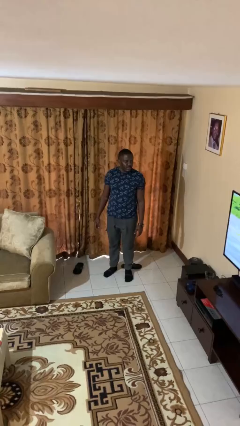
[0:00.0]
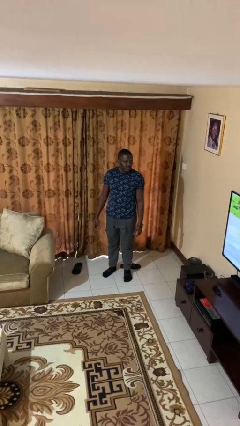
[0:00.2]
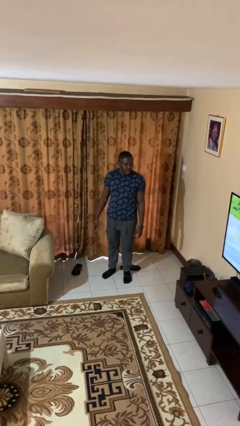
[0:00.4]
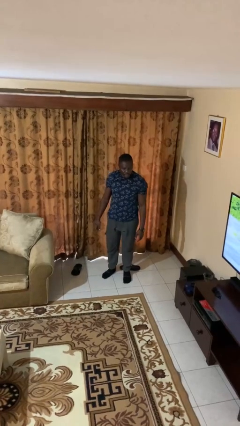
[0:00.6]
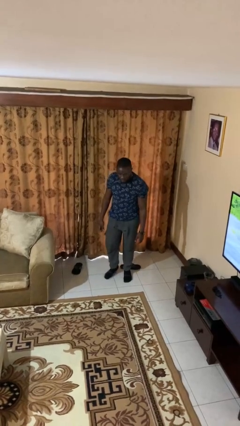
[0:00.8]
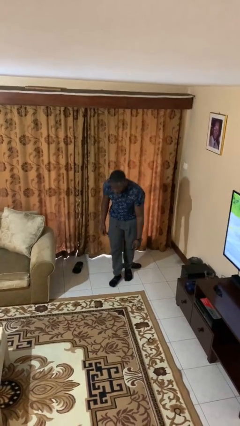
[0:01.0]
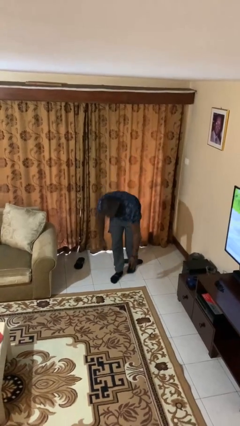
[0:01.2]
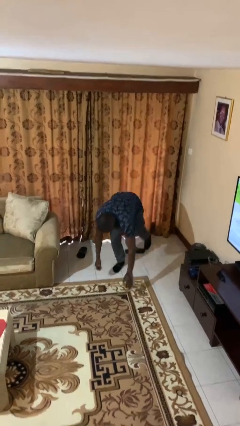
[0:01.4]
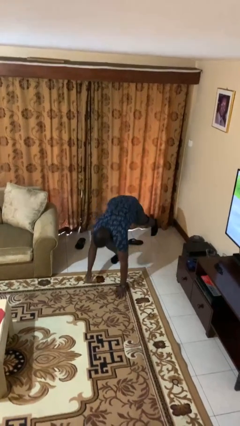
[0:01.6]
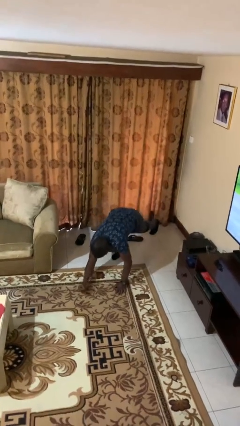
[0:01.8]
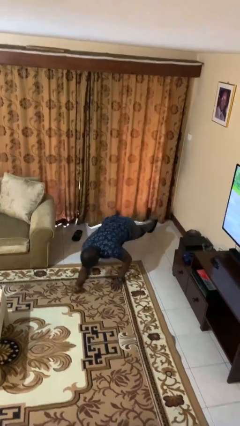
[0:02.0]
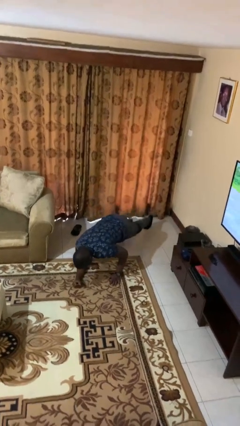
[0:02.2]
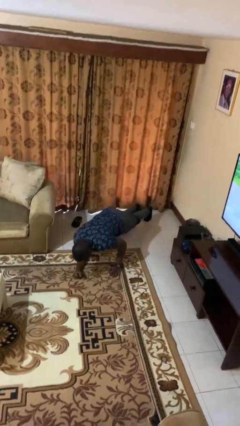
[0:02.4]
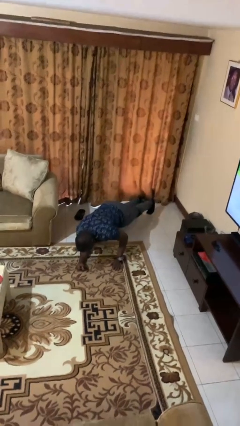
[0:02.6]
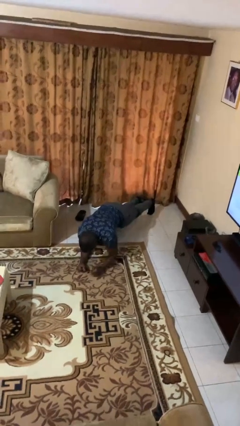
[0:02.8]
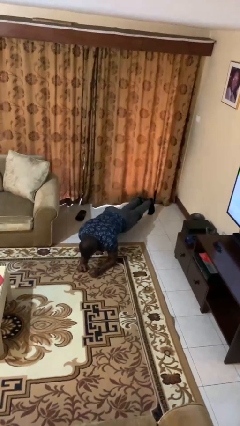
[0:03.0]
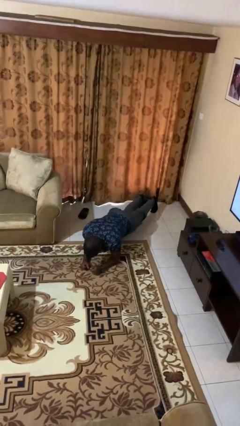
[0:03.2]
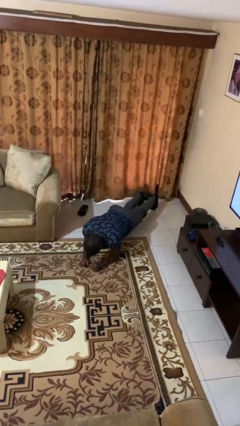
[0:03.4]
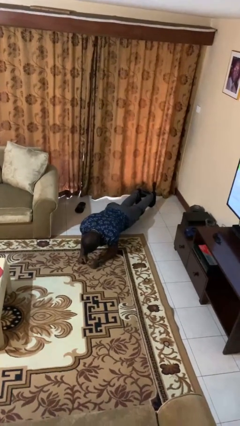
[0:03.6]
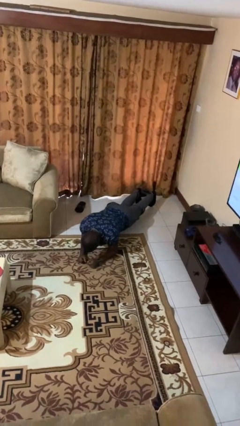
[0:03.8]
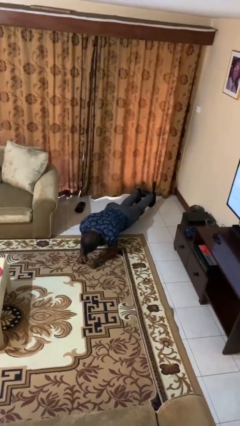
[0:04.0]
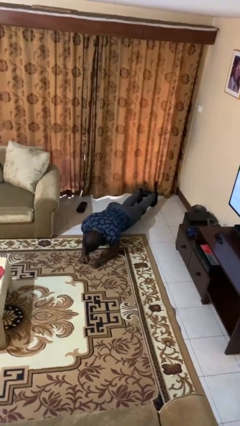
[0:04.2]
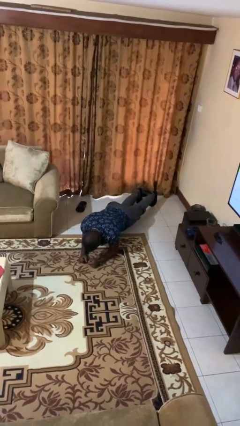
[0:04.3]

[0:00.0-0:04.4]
person exercises with plank

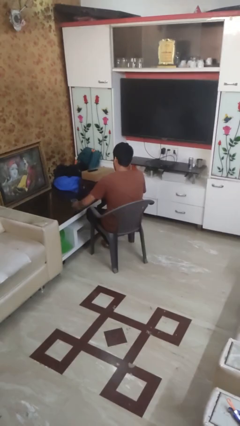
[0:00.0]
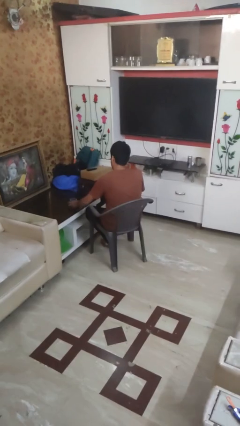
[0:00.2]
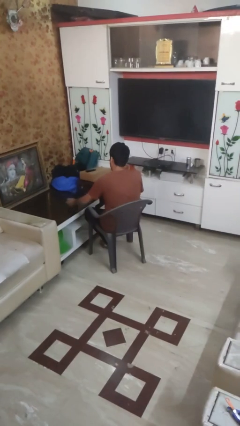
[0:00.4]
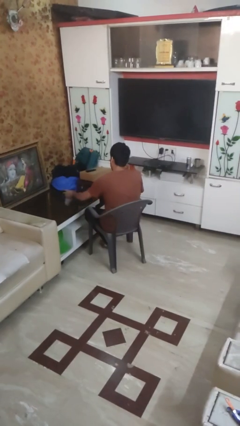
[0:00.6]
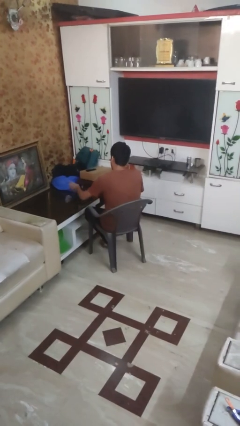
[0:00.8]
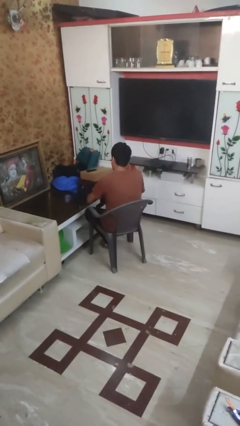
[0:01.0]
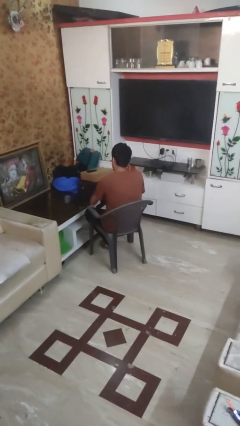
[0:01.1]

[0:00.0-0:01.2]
person knocks over glass

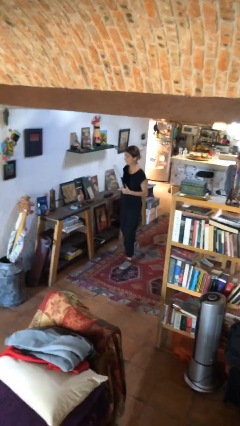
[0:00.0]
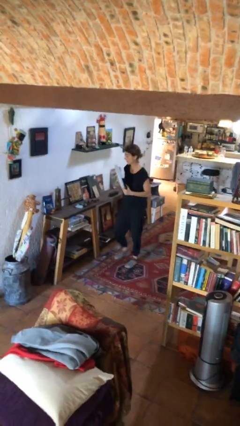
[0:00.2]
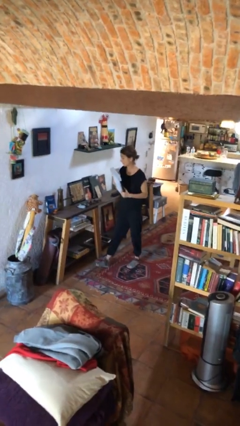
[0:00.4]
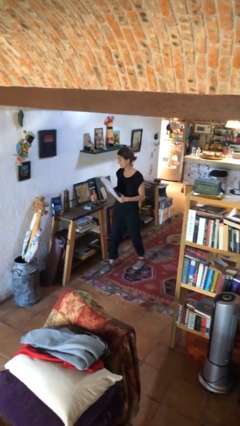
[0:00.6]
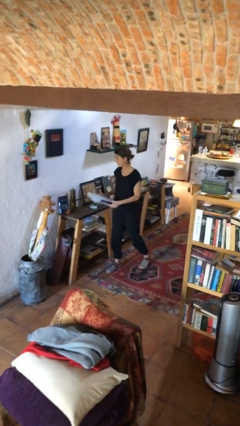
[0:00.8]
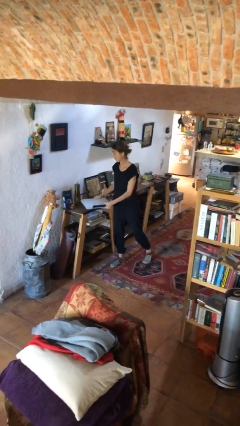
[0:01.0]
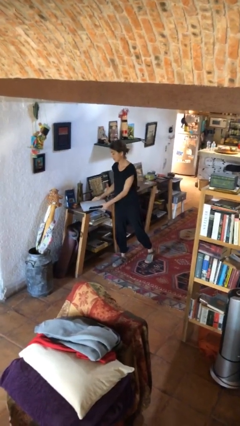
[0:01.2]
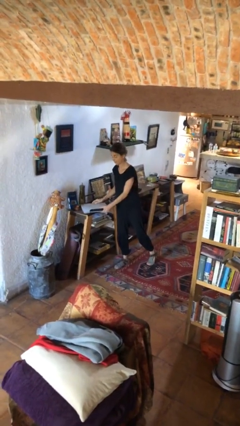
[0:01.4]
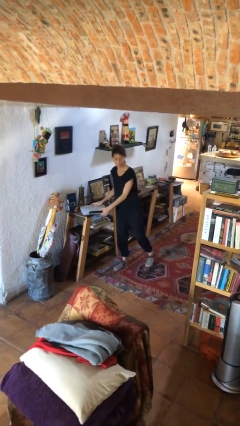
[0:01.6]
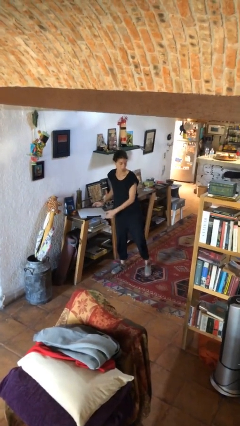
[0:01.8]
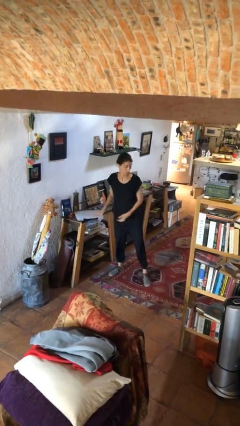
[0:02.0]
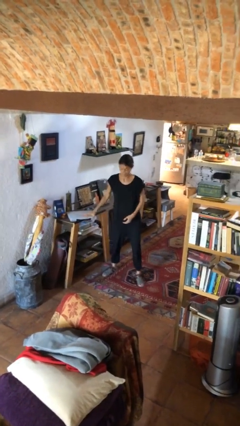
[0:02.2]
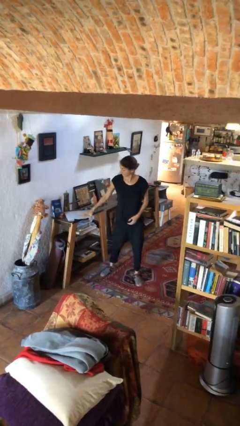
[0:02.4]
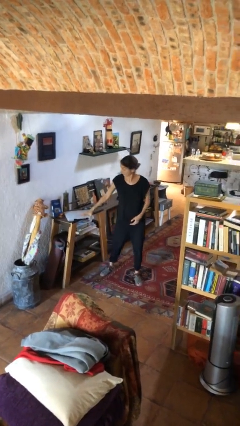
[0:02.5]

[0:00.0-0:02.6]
person puts down object on table

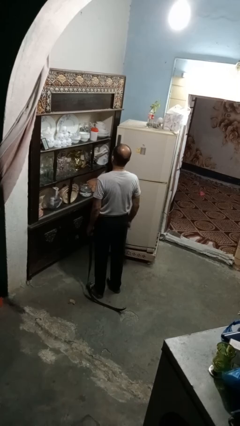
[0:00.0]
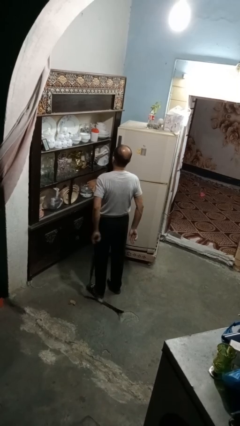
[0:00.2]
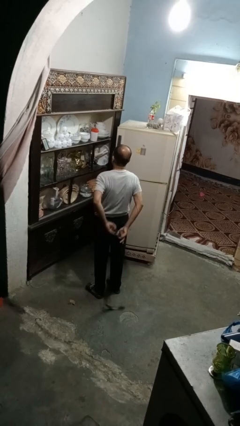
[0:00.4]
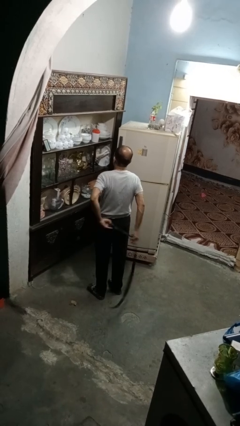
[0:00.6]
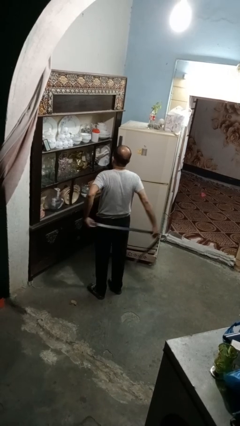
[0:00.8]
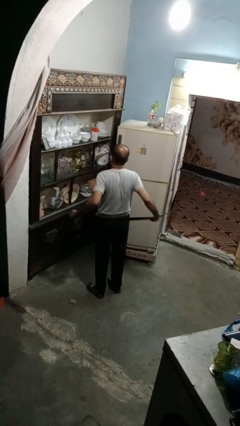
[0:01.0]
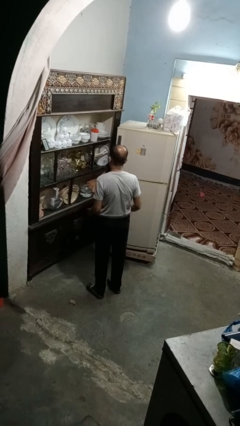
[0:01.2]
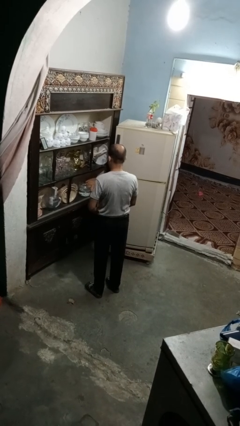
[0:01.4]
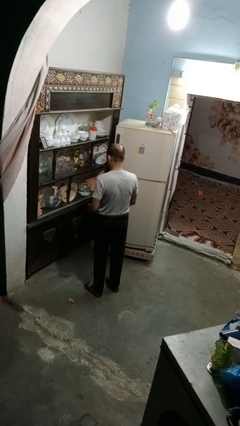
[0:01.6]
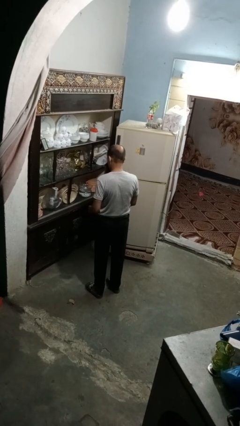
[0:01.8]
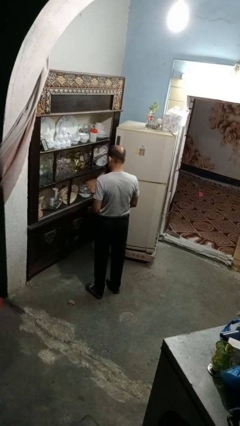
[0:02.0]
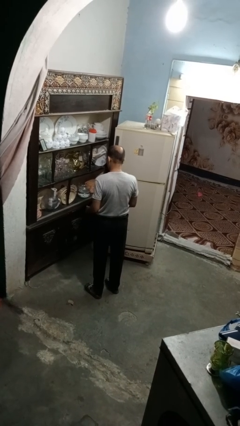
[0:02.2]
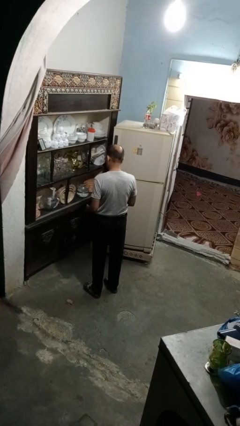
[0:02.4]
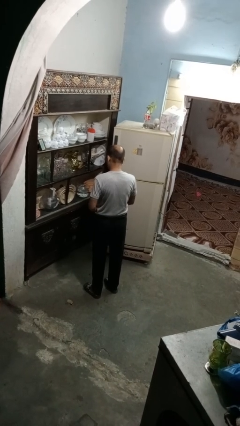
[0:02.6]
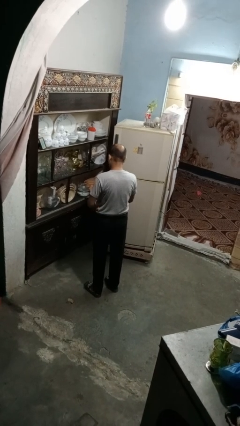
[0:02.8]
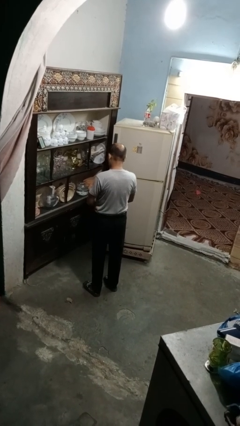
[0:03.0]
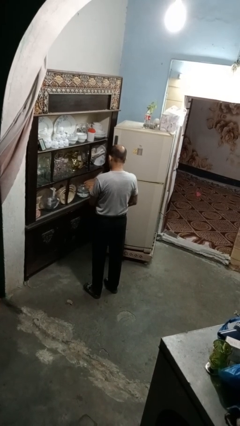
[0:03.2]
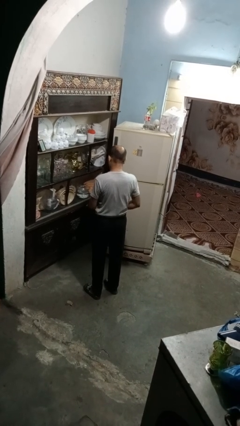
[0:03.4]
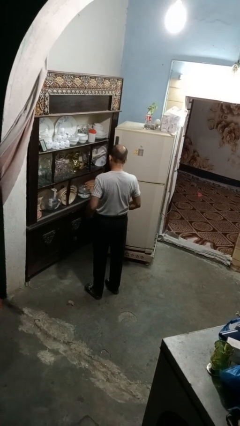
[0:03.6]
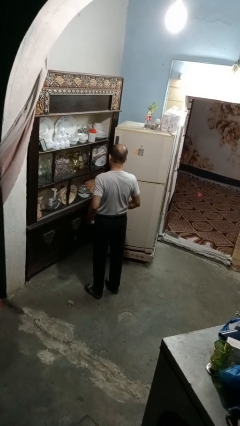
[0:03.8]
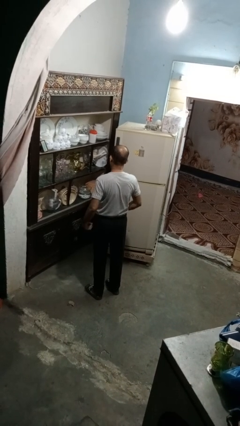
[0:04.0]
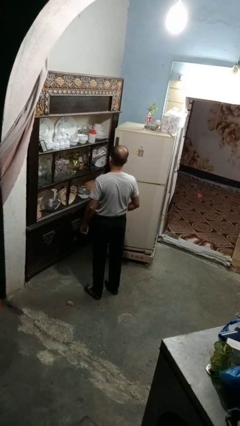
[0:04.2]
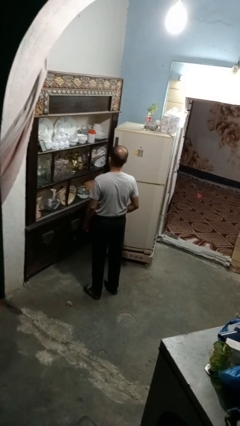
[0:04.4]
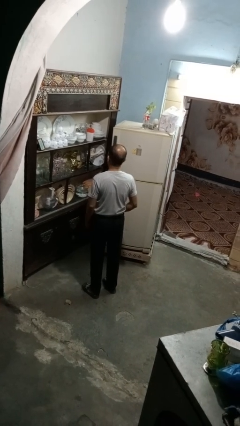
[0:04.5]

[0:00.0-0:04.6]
person puts on belt

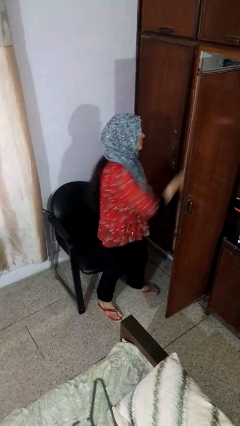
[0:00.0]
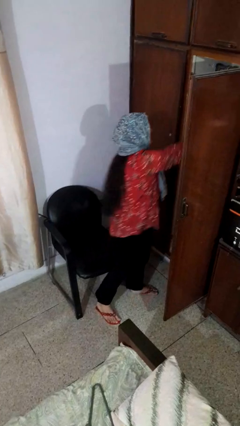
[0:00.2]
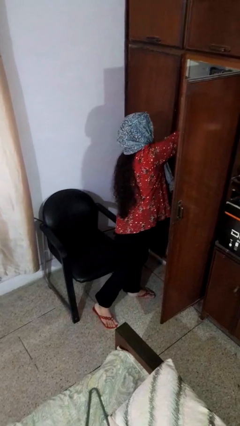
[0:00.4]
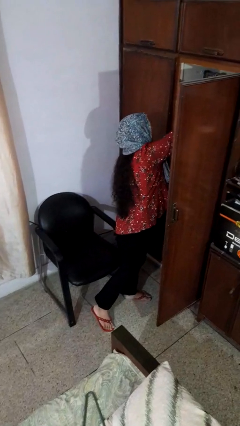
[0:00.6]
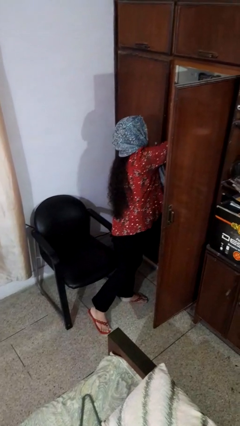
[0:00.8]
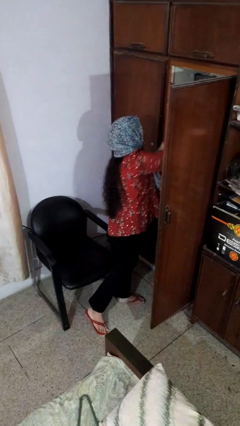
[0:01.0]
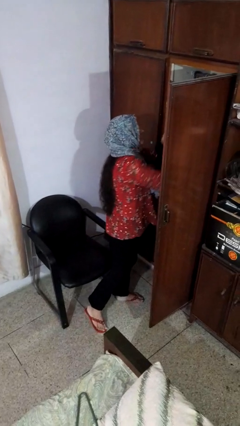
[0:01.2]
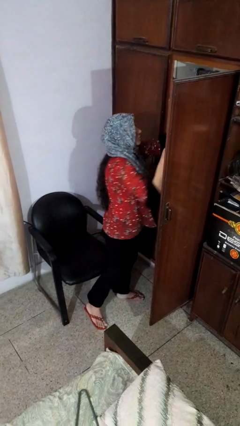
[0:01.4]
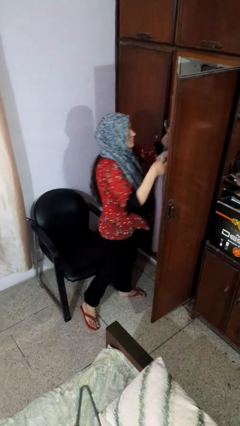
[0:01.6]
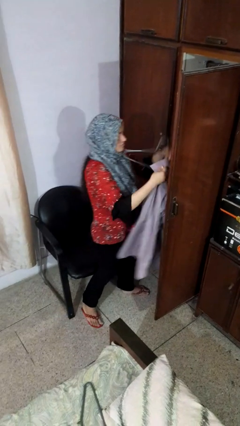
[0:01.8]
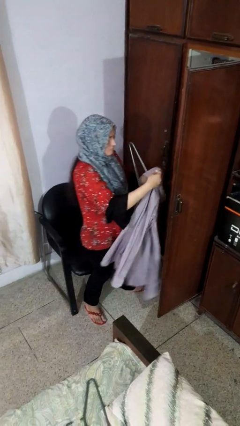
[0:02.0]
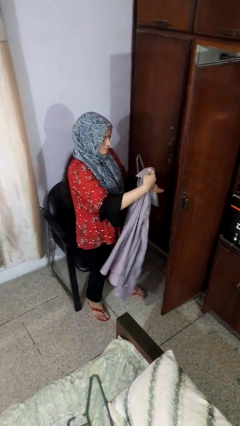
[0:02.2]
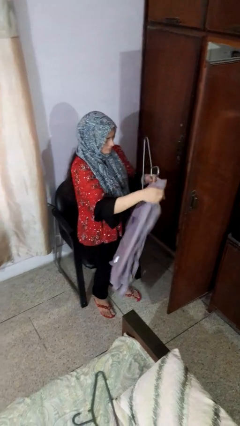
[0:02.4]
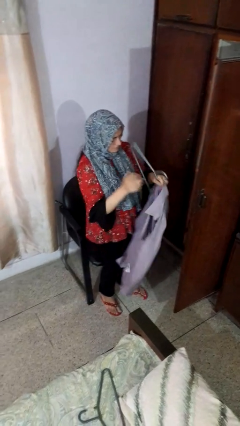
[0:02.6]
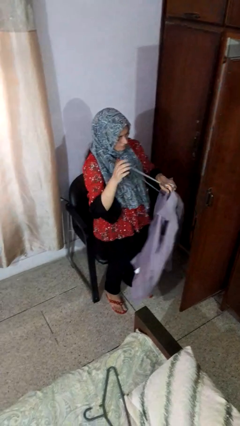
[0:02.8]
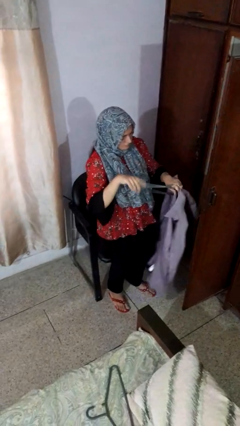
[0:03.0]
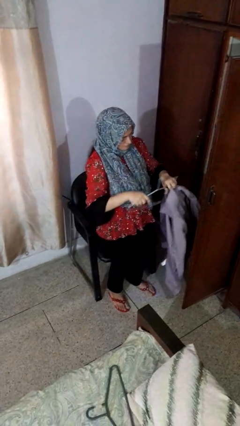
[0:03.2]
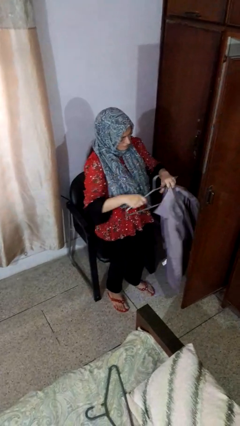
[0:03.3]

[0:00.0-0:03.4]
person takes clothes from closet

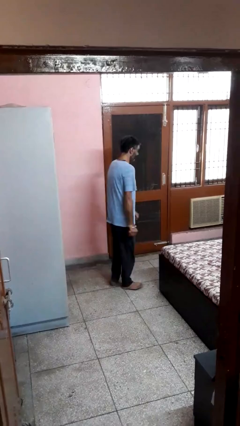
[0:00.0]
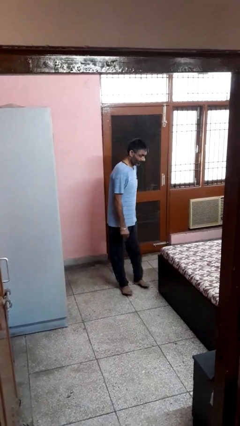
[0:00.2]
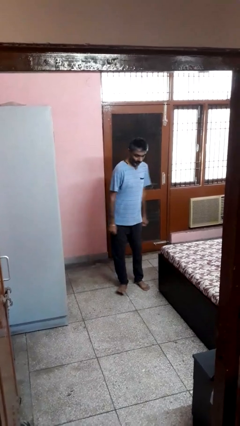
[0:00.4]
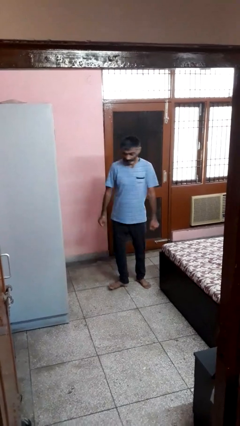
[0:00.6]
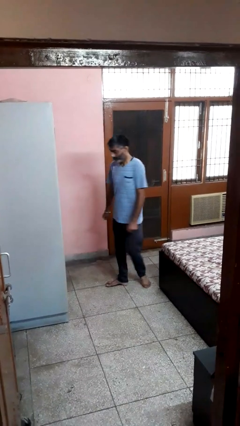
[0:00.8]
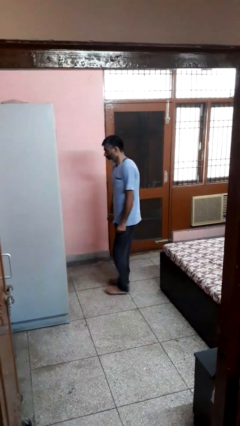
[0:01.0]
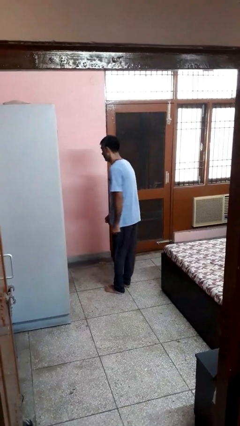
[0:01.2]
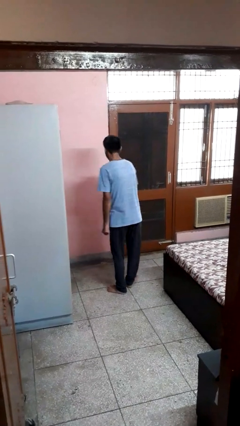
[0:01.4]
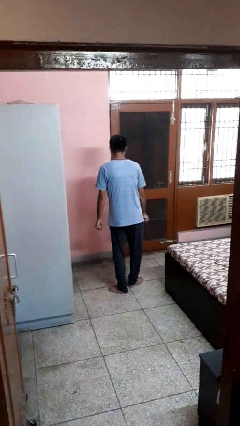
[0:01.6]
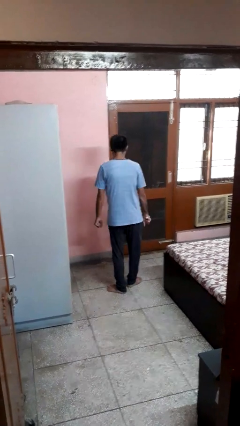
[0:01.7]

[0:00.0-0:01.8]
person twirls
